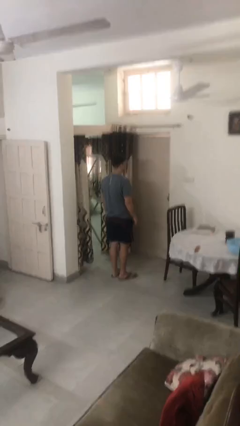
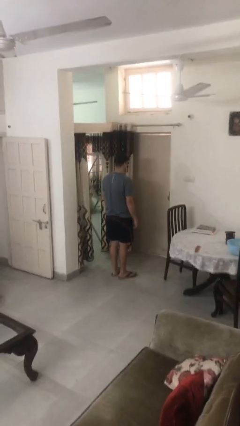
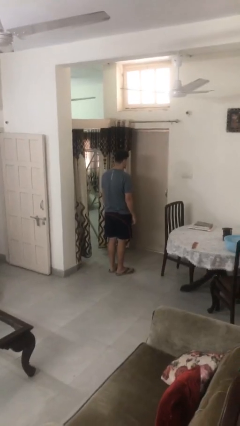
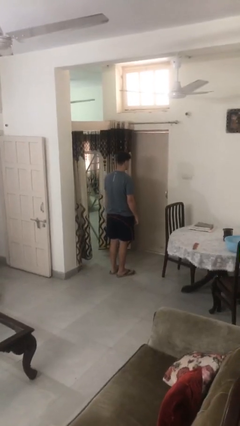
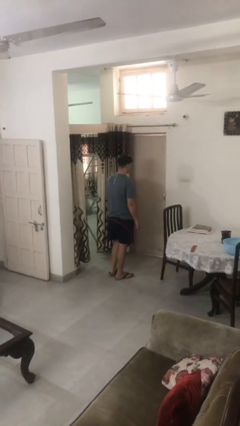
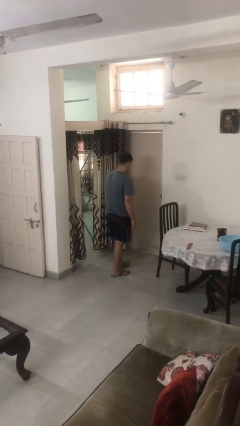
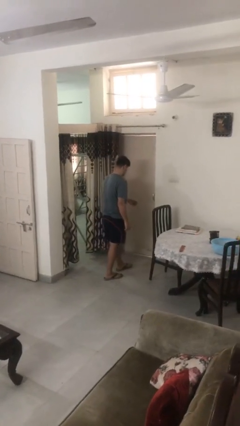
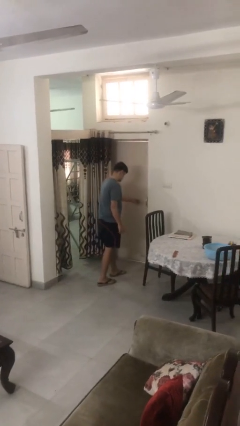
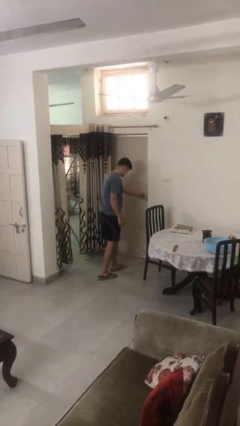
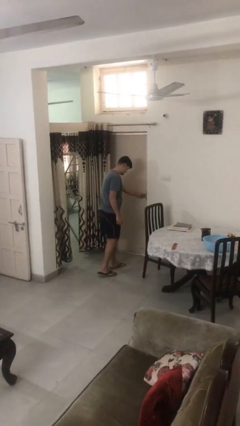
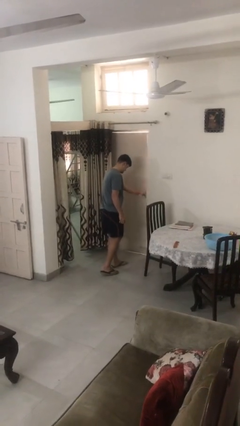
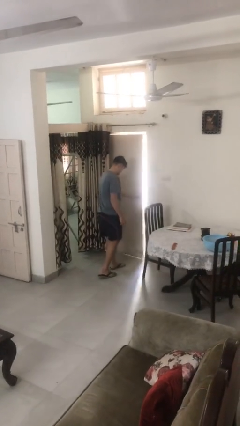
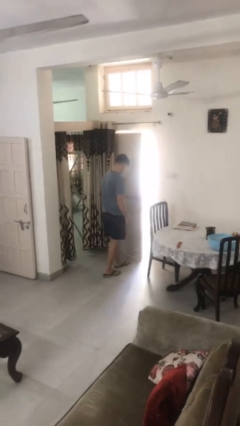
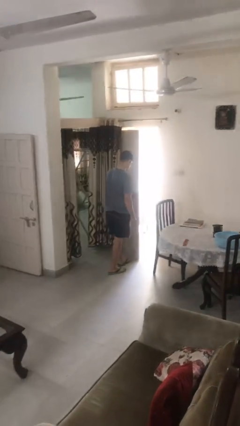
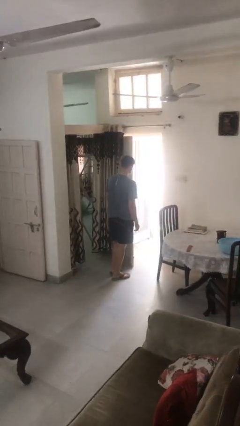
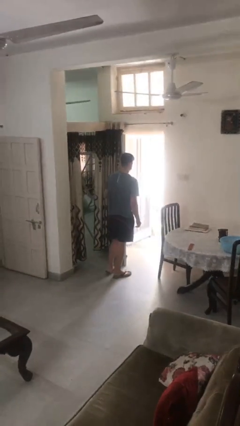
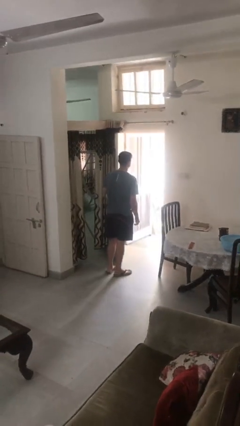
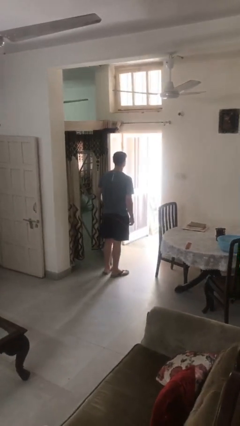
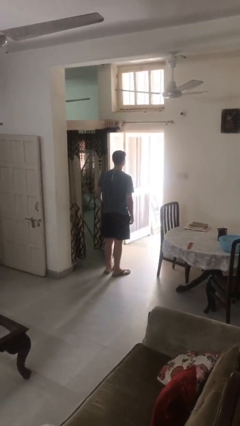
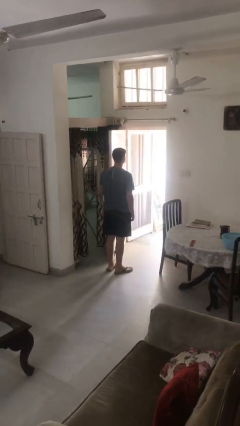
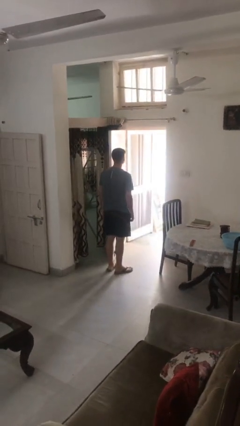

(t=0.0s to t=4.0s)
person opens facility door

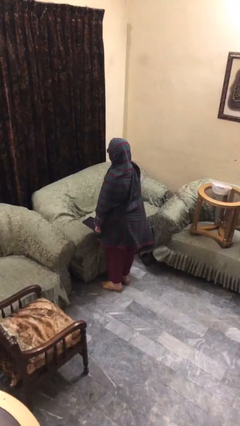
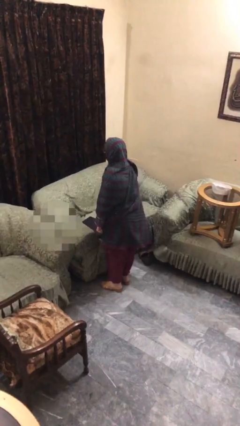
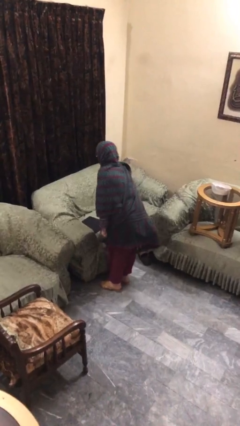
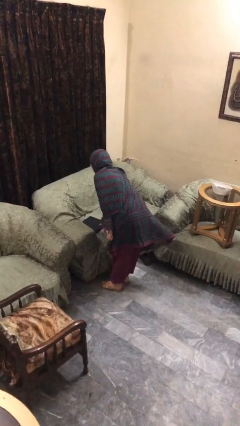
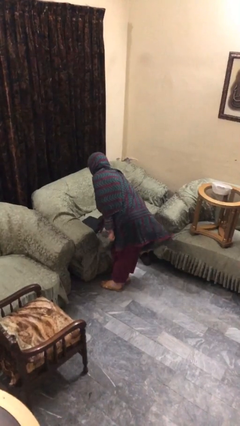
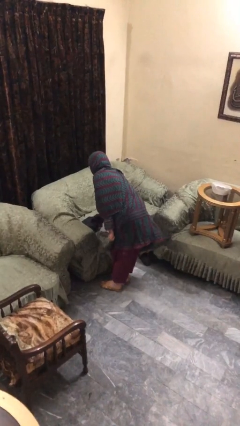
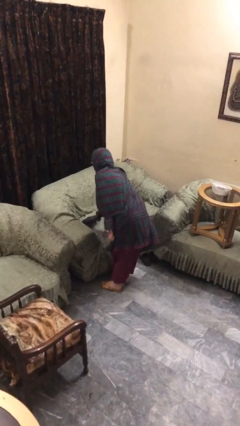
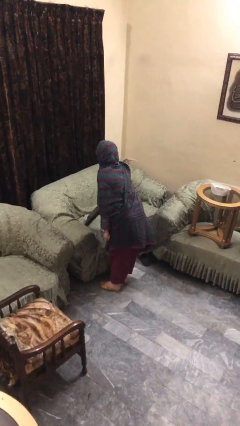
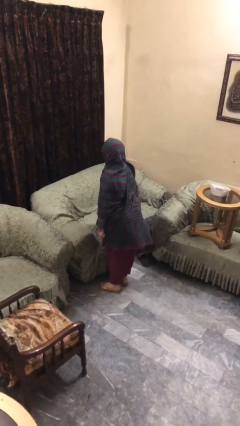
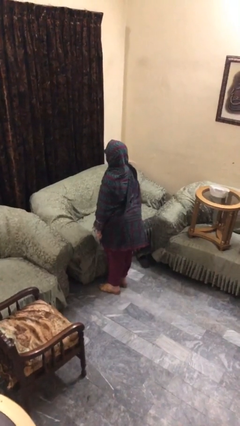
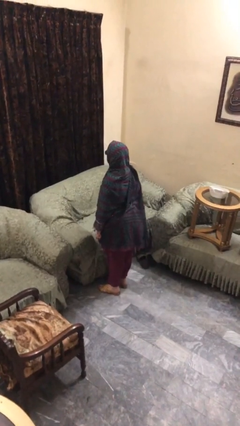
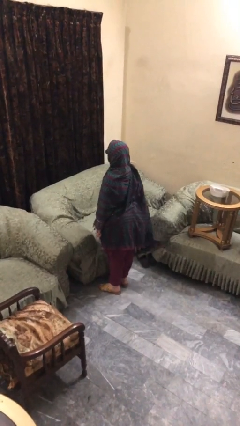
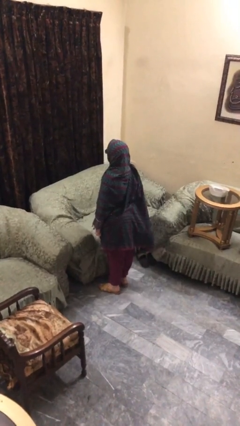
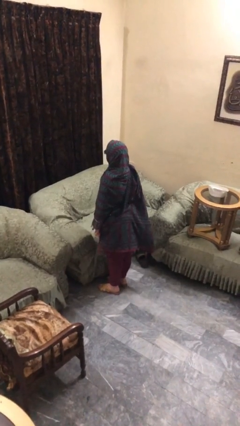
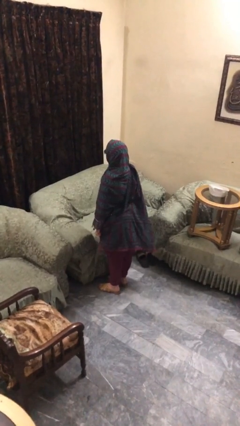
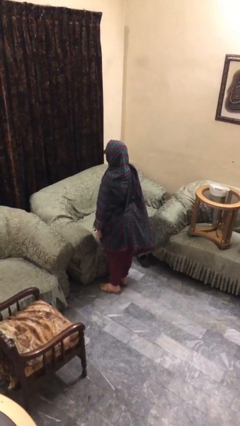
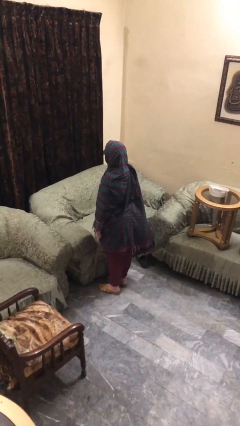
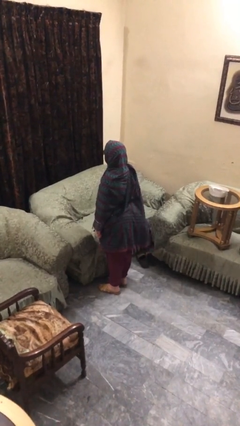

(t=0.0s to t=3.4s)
person picks up object from couch

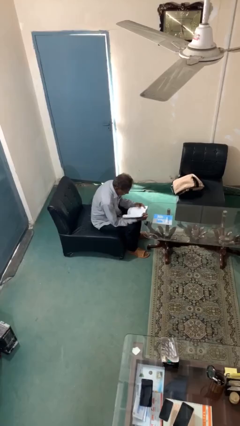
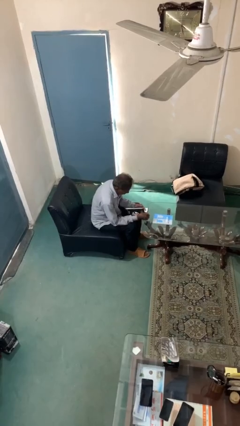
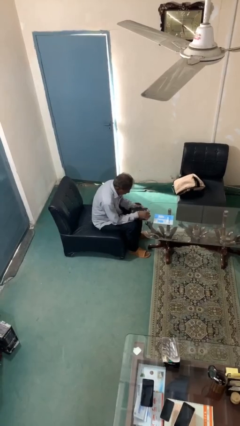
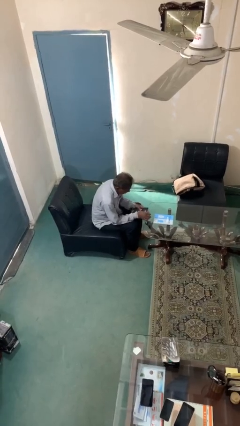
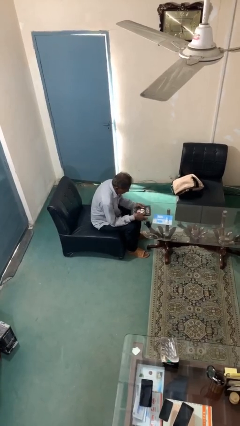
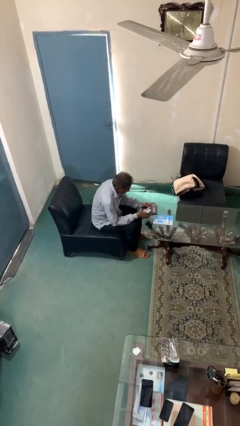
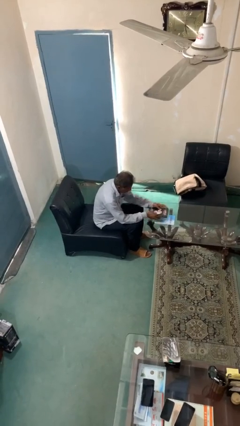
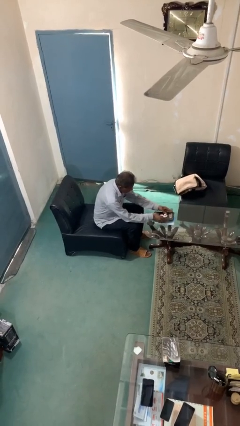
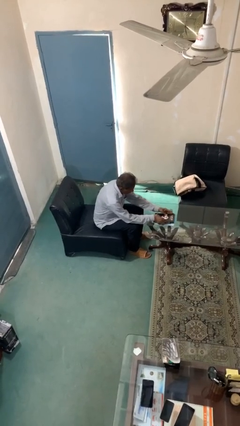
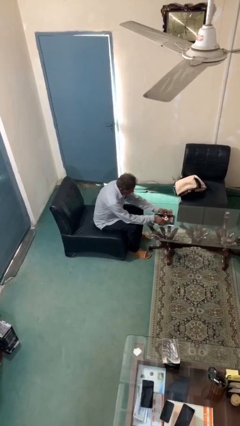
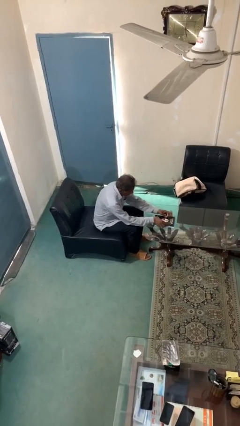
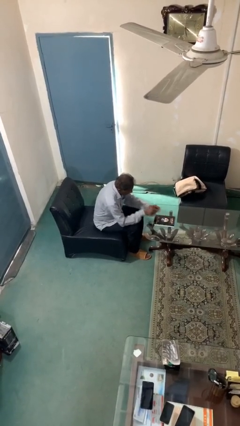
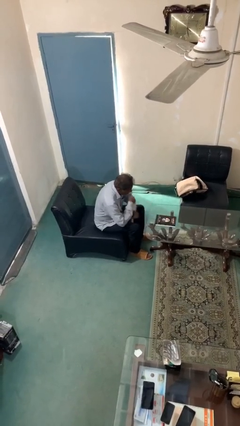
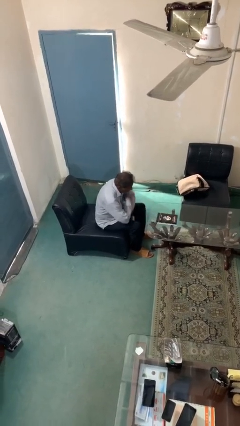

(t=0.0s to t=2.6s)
person puts down object on table

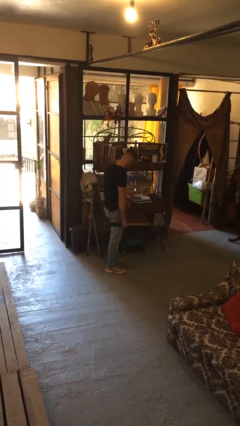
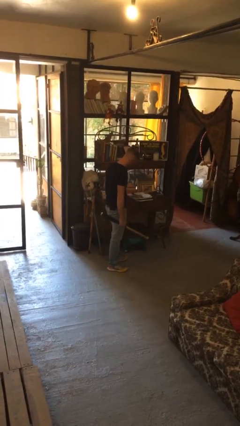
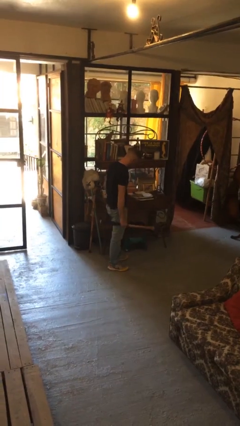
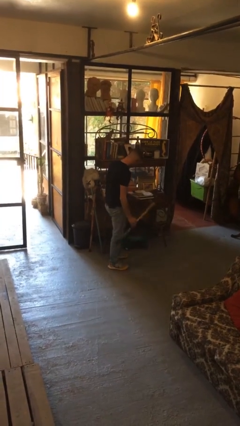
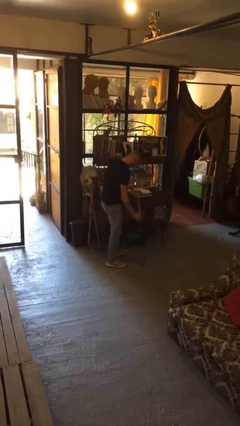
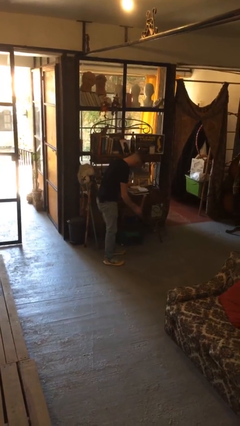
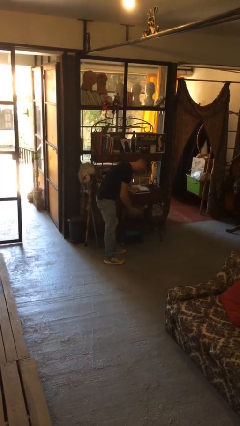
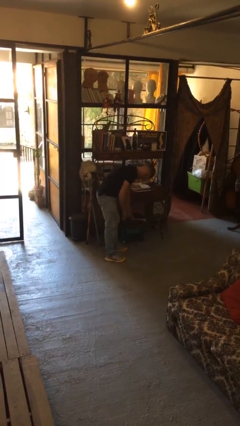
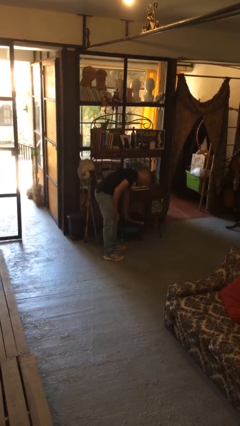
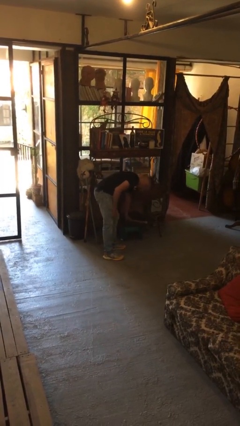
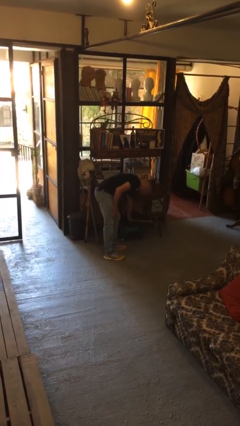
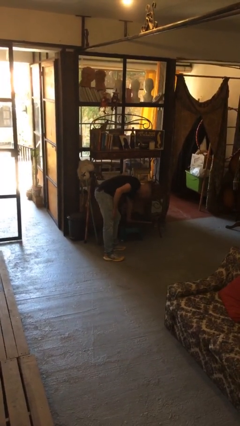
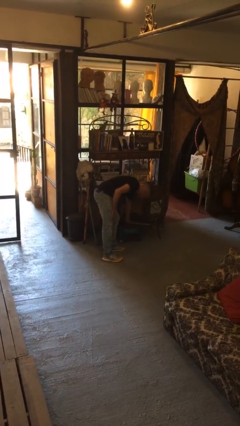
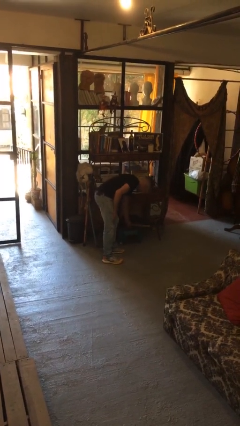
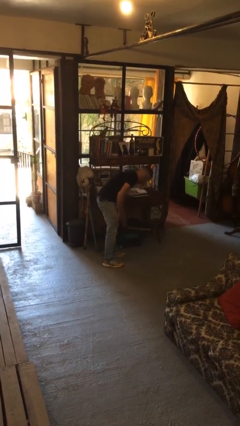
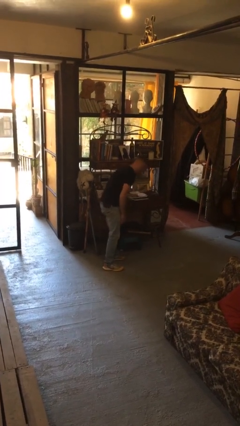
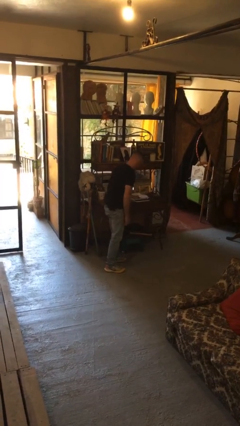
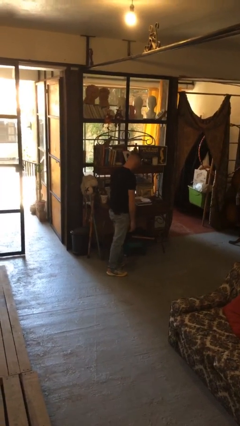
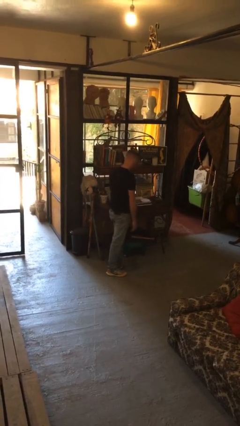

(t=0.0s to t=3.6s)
person puts down object into cabinet

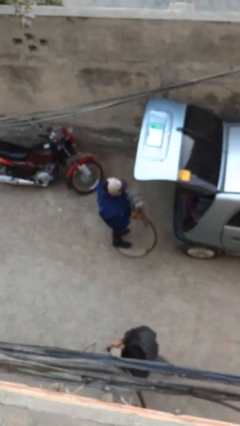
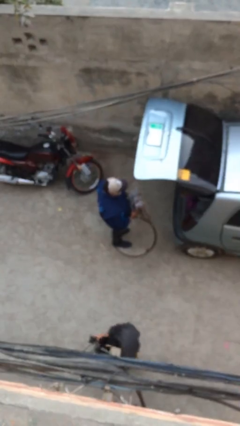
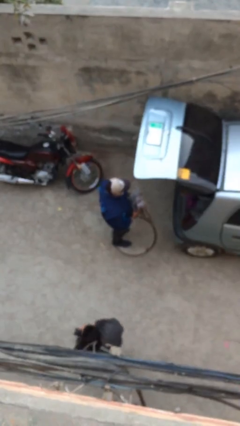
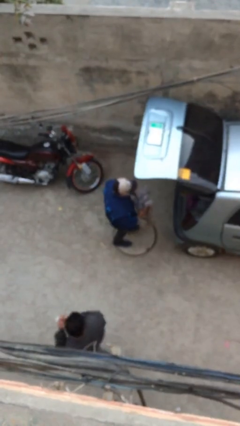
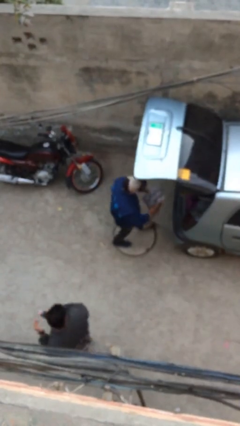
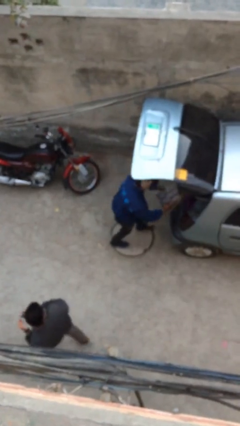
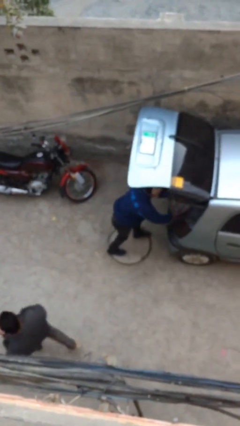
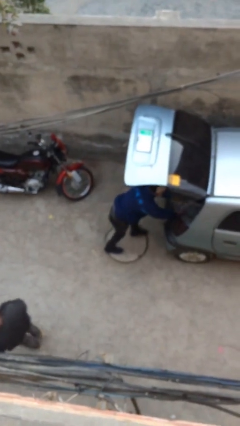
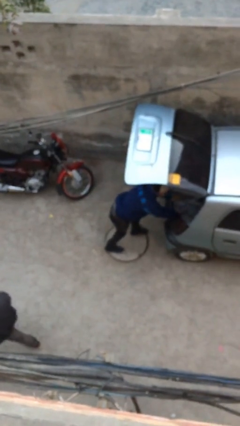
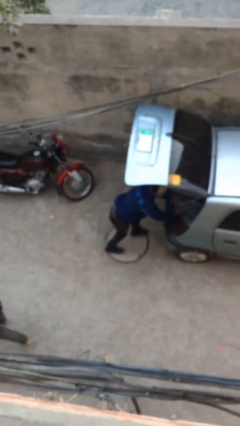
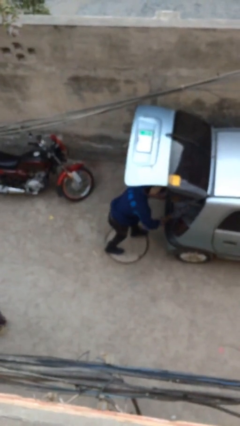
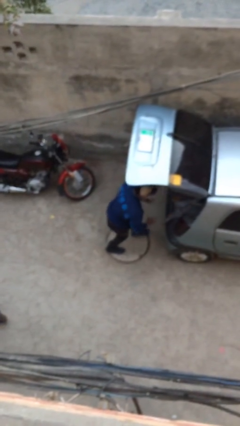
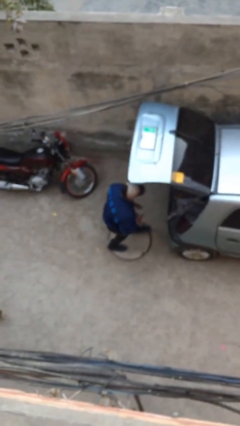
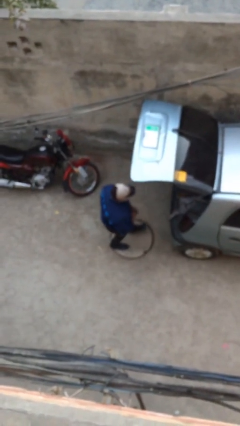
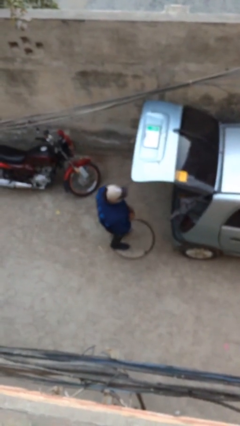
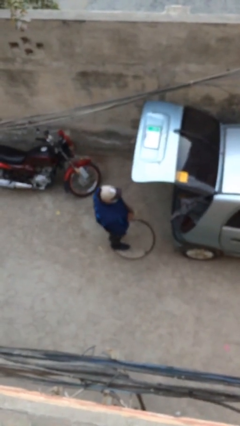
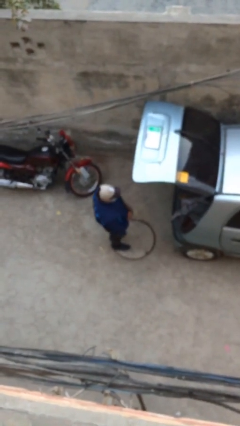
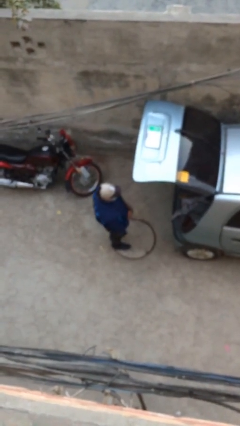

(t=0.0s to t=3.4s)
person loads car

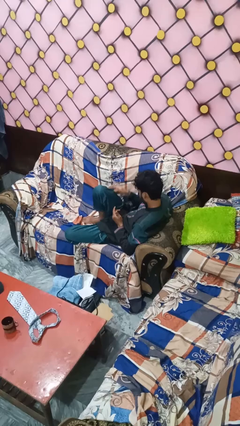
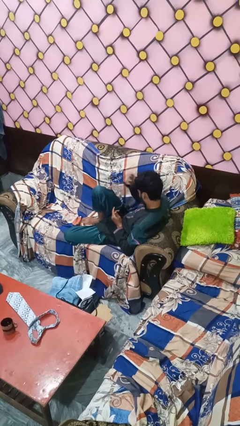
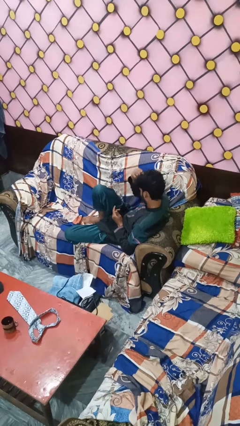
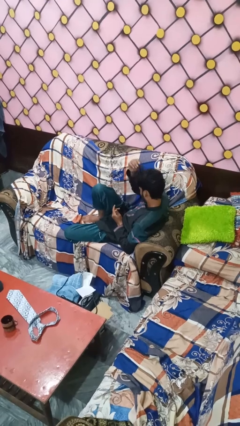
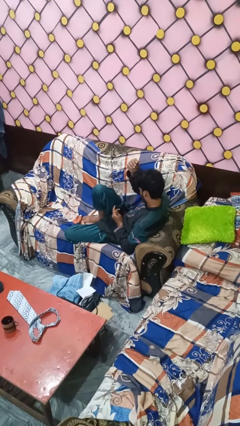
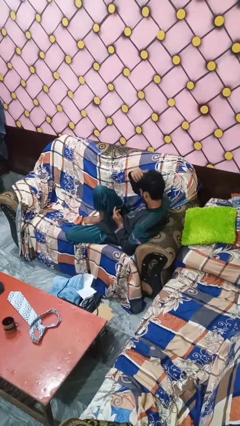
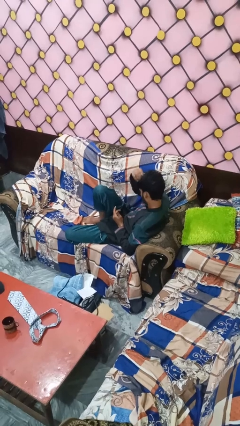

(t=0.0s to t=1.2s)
person strokes hair
